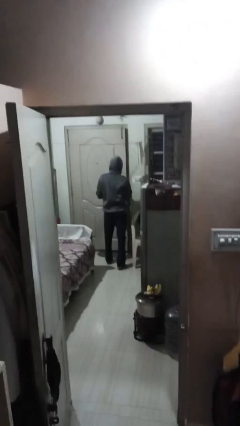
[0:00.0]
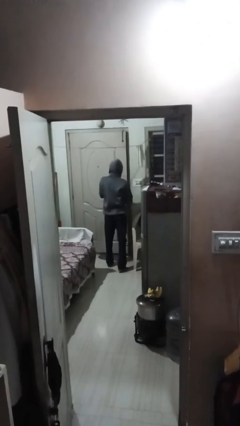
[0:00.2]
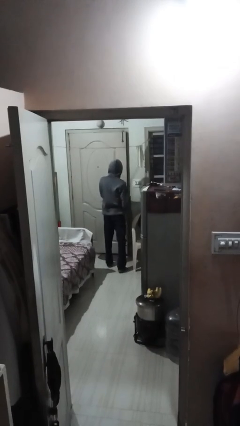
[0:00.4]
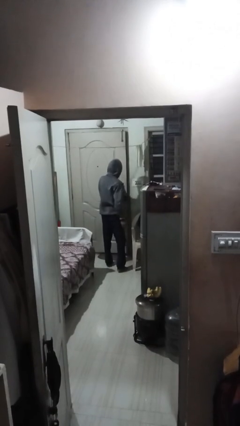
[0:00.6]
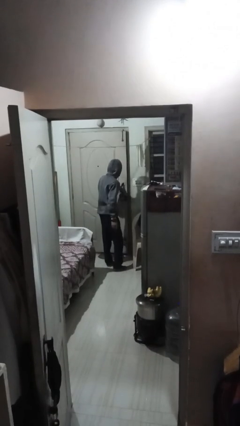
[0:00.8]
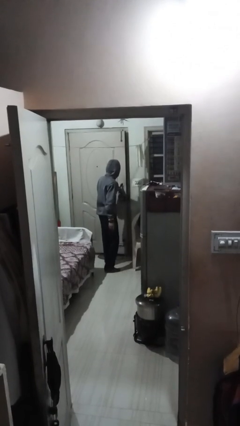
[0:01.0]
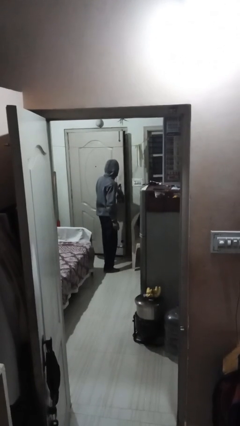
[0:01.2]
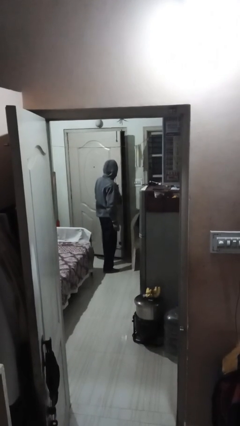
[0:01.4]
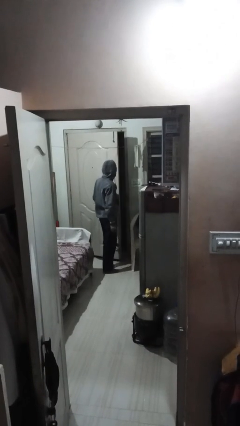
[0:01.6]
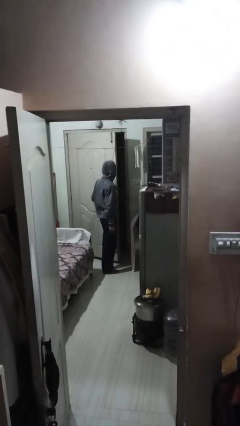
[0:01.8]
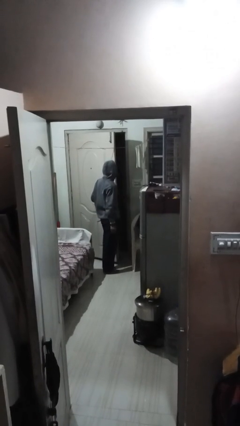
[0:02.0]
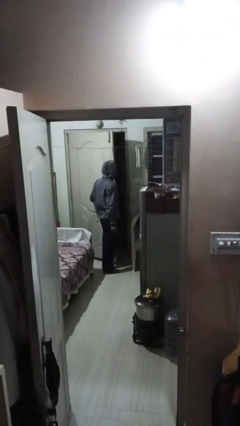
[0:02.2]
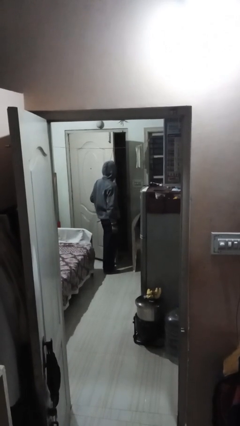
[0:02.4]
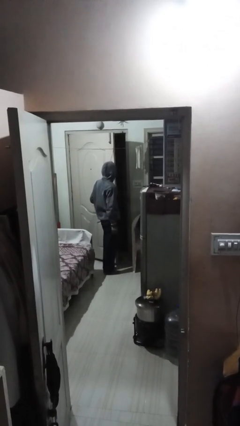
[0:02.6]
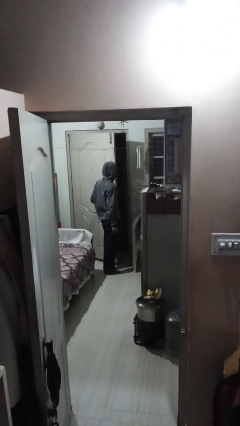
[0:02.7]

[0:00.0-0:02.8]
person opens facility door

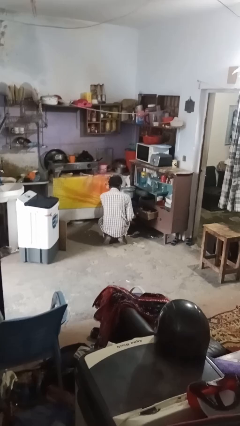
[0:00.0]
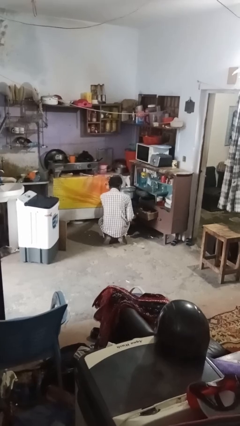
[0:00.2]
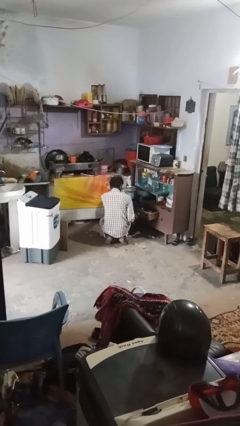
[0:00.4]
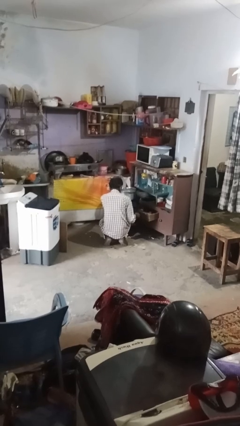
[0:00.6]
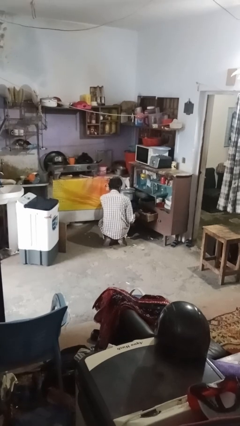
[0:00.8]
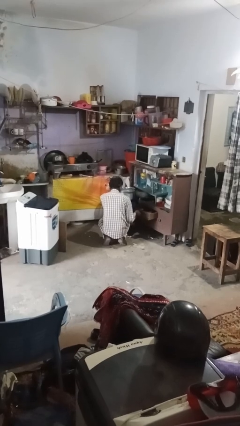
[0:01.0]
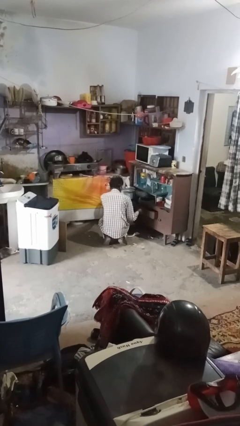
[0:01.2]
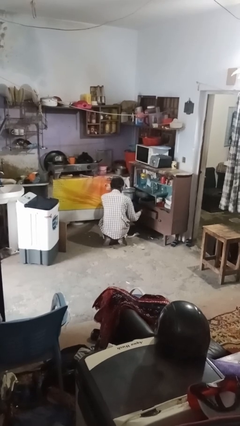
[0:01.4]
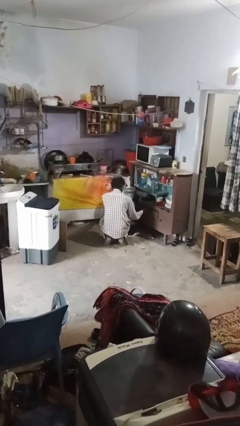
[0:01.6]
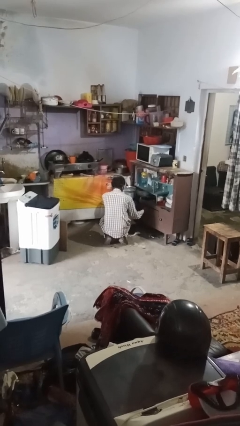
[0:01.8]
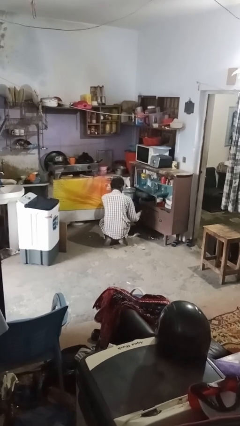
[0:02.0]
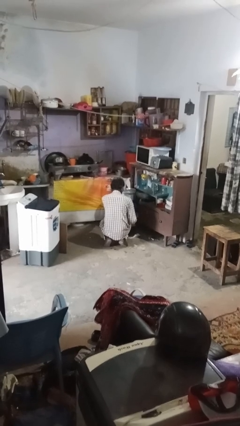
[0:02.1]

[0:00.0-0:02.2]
person closes kitchen drawer

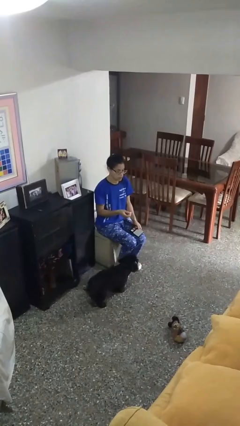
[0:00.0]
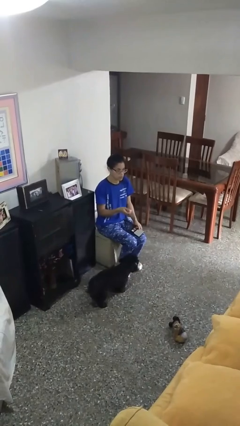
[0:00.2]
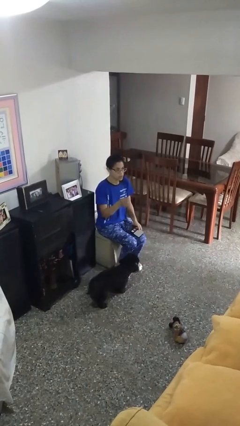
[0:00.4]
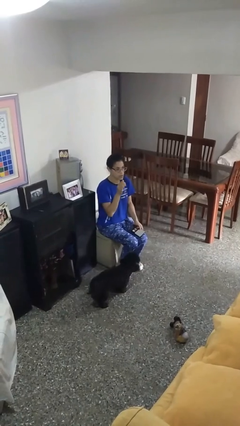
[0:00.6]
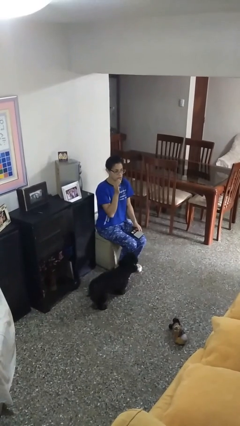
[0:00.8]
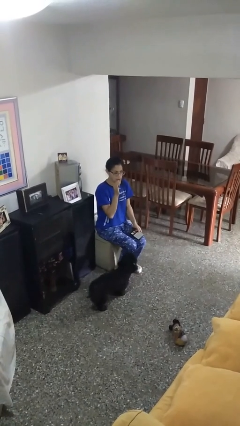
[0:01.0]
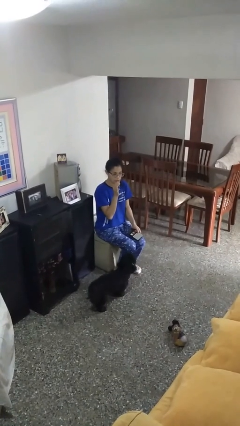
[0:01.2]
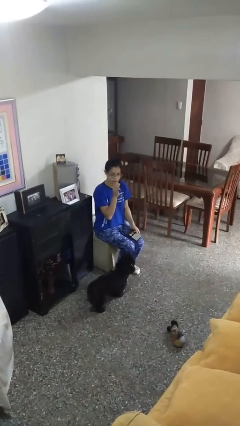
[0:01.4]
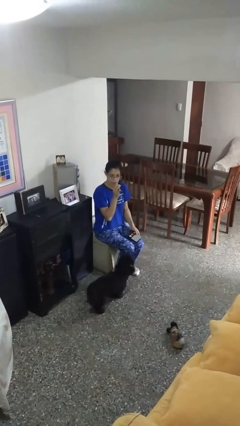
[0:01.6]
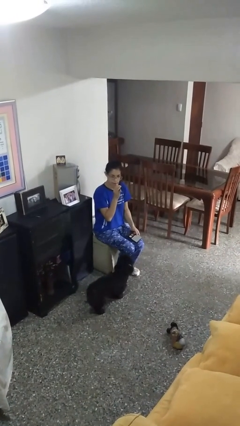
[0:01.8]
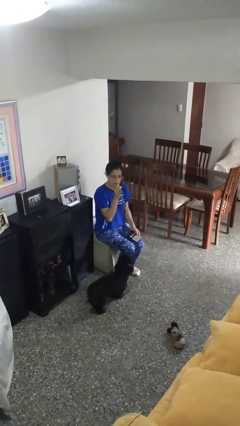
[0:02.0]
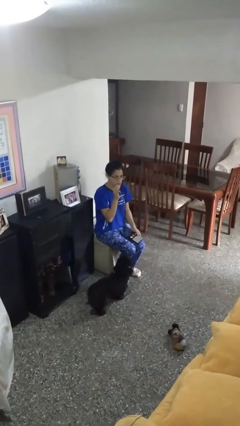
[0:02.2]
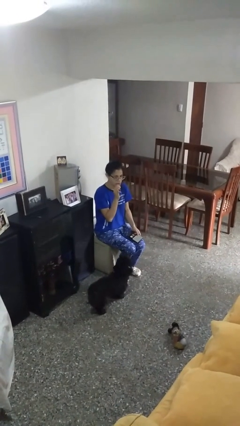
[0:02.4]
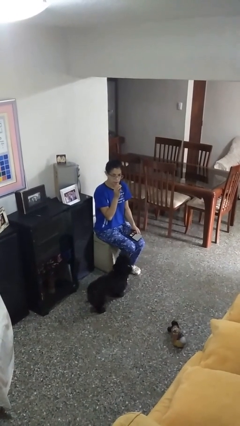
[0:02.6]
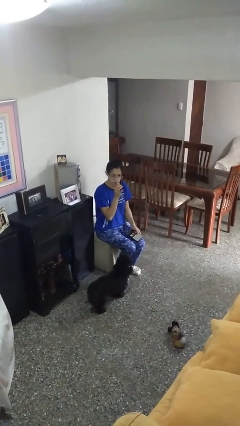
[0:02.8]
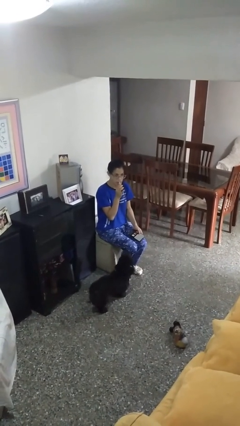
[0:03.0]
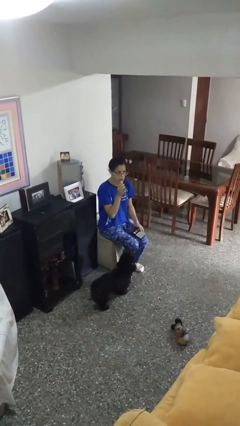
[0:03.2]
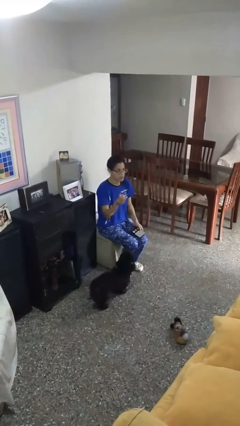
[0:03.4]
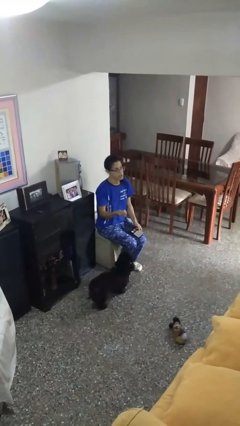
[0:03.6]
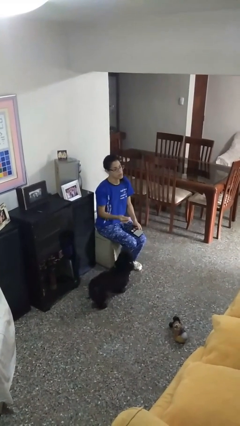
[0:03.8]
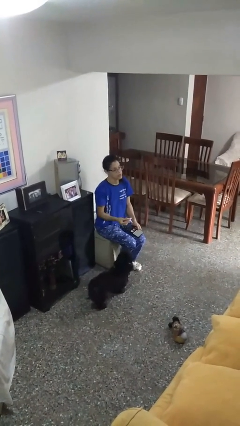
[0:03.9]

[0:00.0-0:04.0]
person applies lip makeup

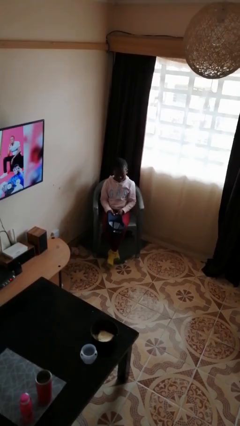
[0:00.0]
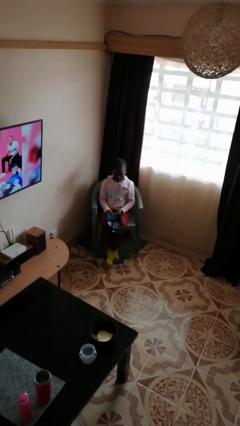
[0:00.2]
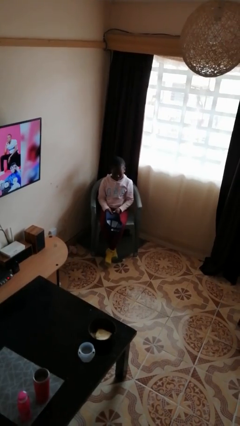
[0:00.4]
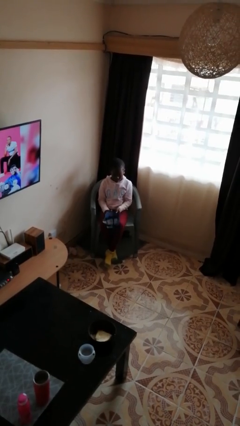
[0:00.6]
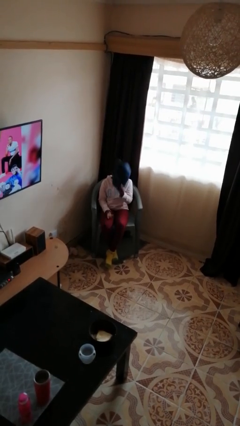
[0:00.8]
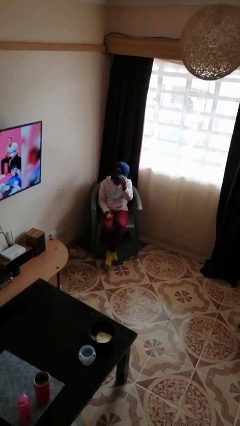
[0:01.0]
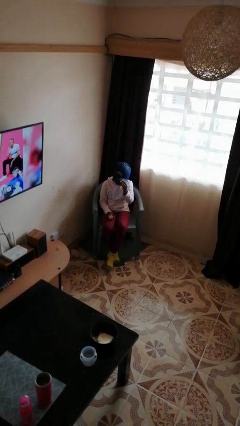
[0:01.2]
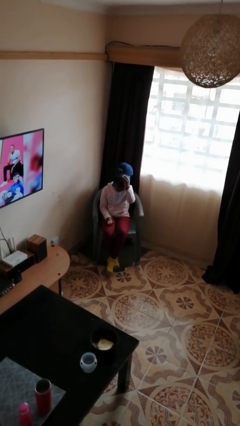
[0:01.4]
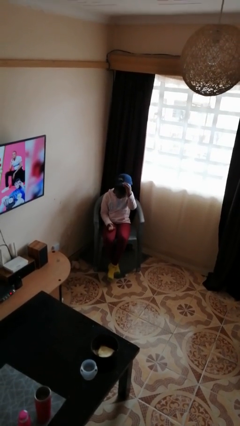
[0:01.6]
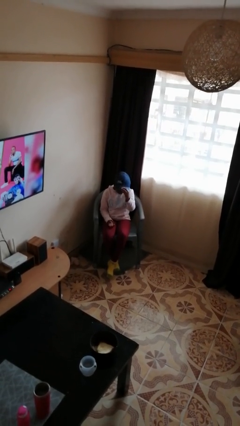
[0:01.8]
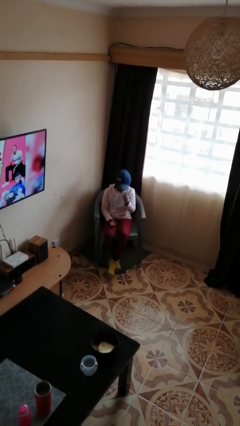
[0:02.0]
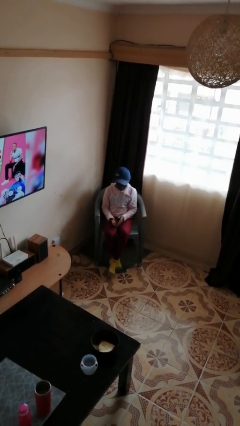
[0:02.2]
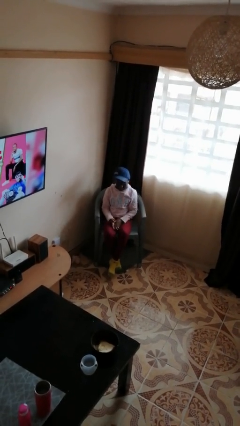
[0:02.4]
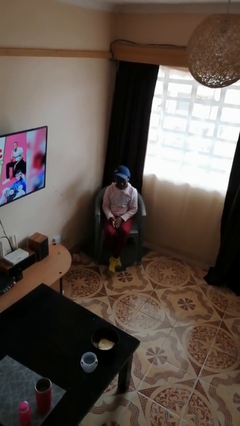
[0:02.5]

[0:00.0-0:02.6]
person puts on hat

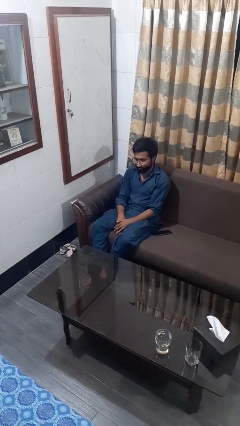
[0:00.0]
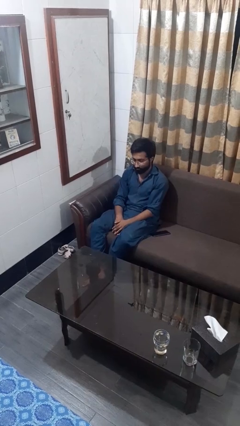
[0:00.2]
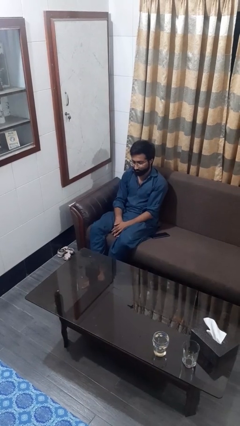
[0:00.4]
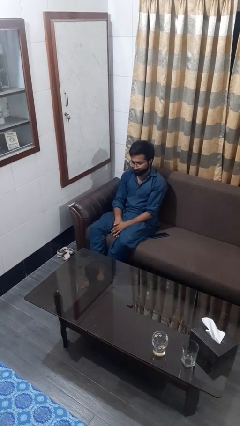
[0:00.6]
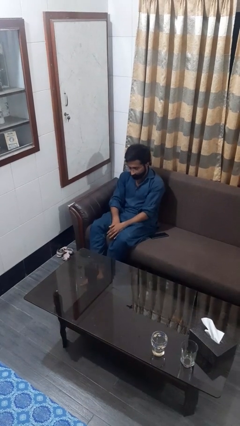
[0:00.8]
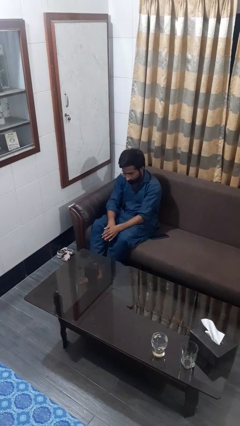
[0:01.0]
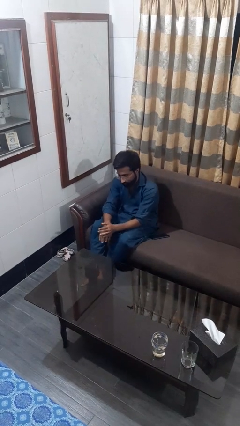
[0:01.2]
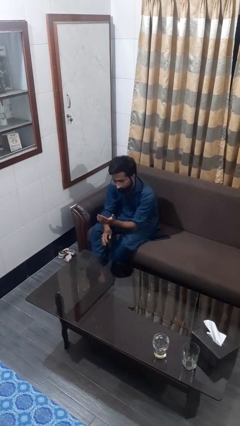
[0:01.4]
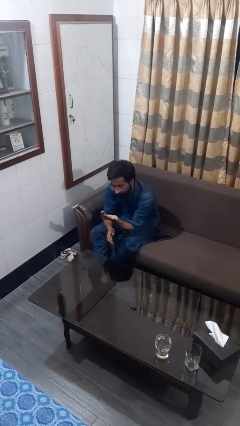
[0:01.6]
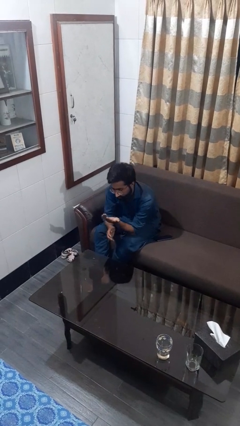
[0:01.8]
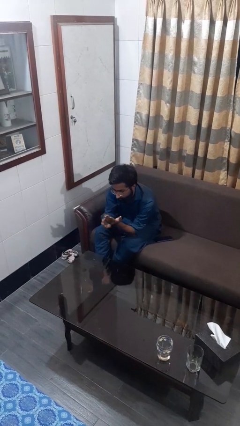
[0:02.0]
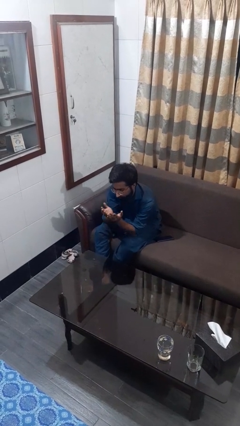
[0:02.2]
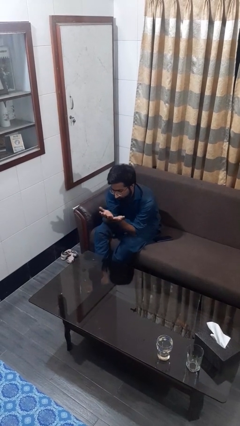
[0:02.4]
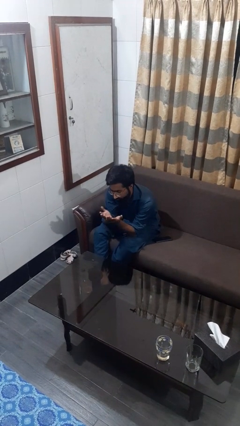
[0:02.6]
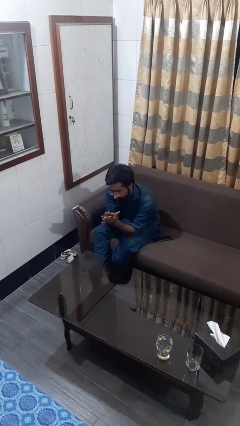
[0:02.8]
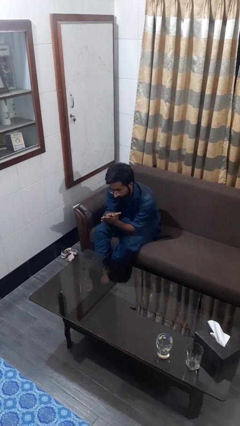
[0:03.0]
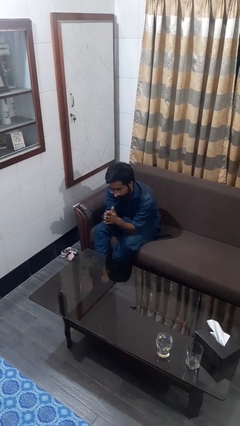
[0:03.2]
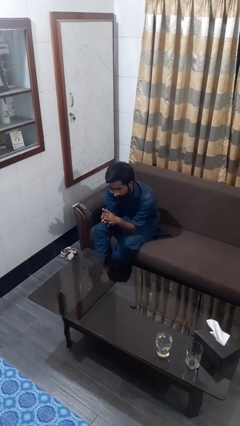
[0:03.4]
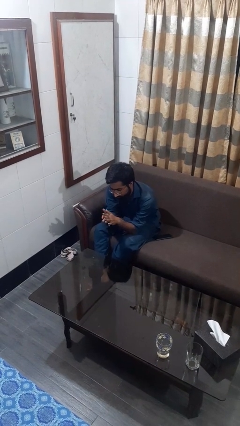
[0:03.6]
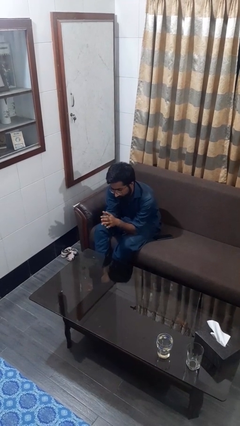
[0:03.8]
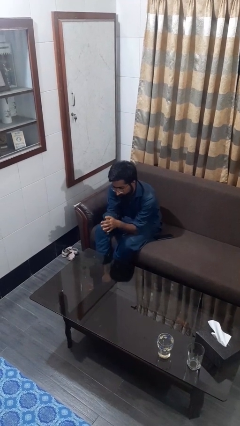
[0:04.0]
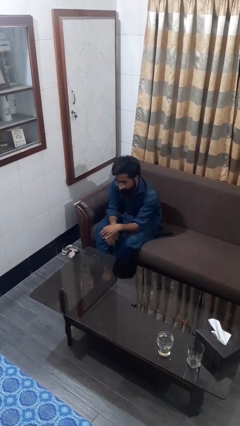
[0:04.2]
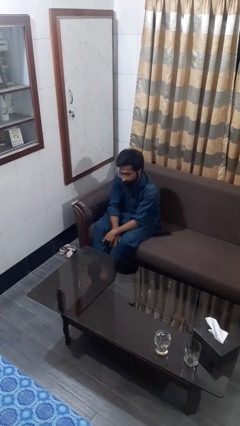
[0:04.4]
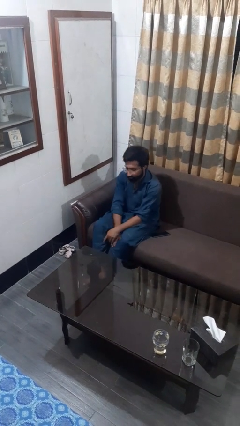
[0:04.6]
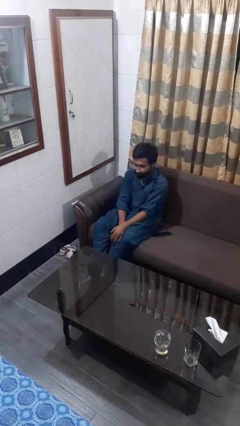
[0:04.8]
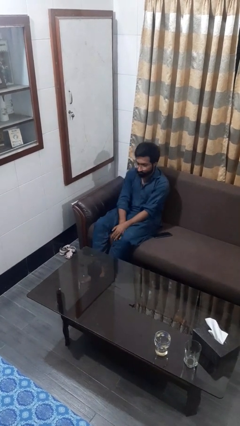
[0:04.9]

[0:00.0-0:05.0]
person looks at hands in lap

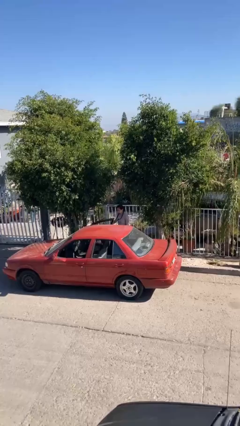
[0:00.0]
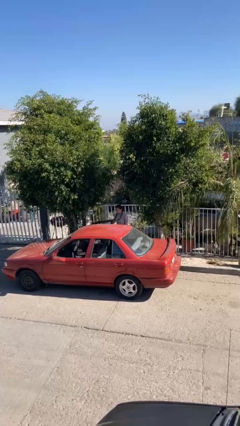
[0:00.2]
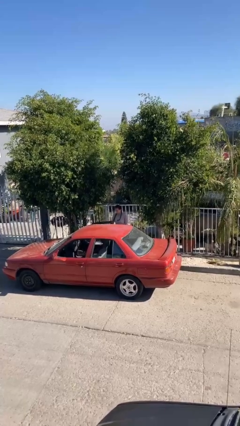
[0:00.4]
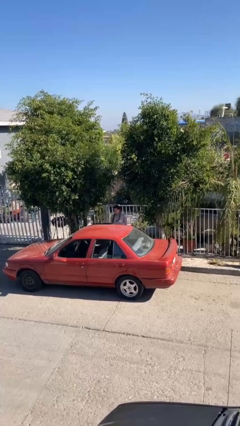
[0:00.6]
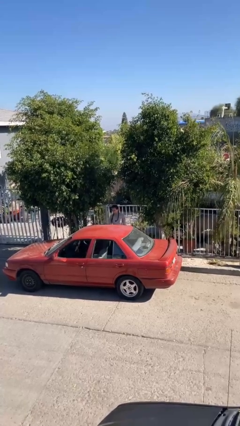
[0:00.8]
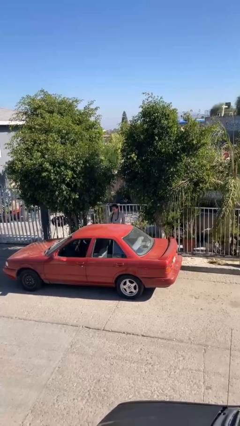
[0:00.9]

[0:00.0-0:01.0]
person closes car door

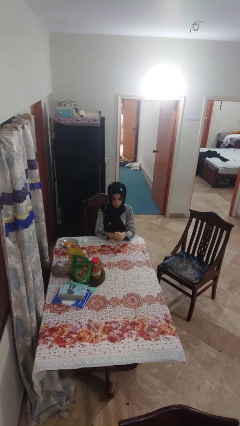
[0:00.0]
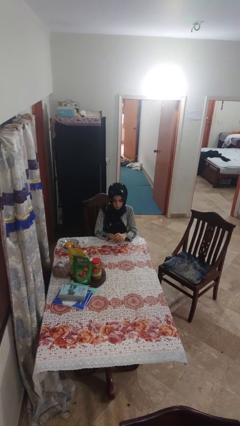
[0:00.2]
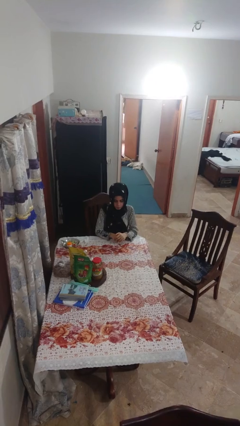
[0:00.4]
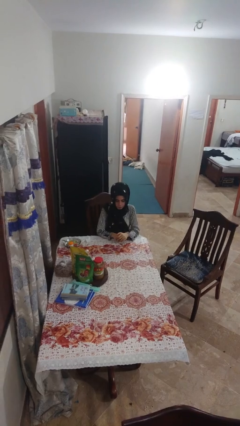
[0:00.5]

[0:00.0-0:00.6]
person claps hands
